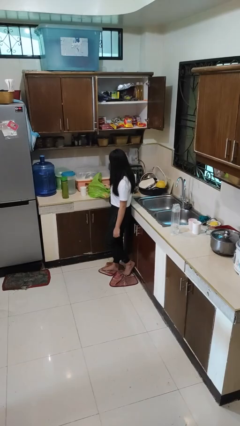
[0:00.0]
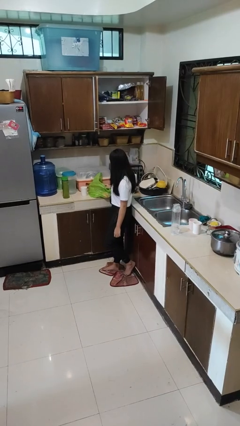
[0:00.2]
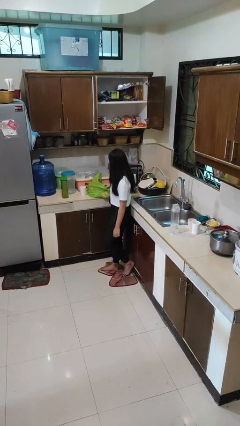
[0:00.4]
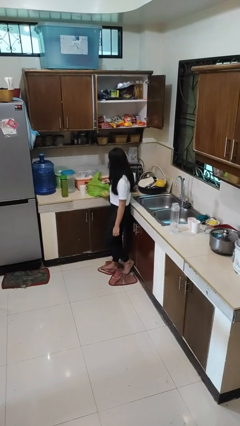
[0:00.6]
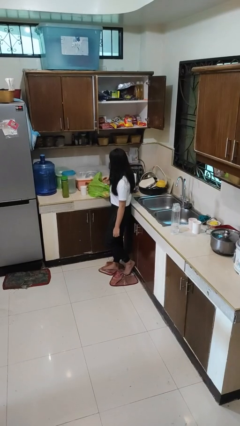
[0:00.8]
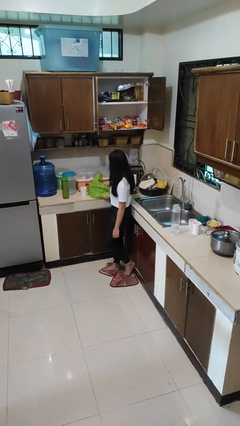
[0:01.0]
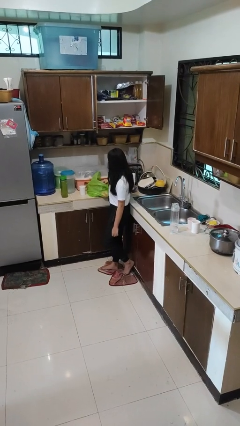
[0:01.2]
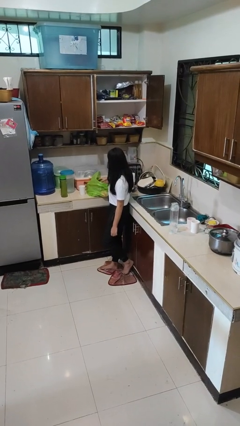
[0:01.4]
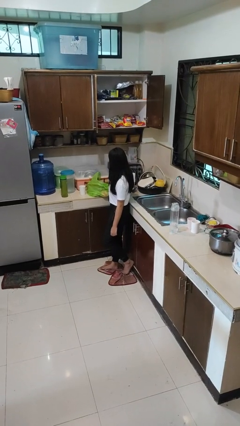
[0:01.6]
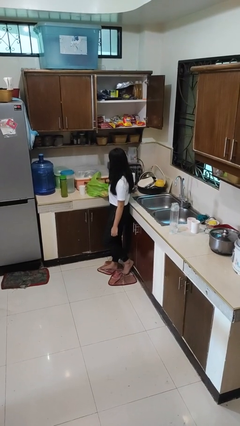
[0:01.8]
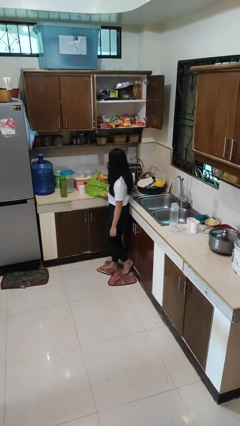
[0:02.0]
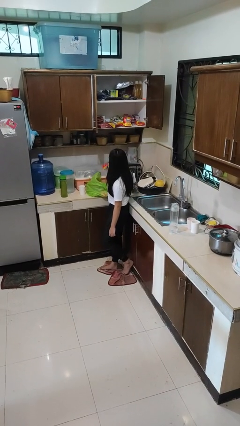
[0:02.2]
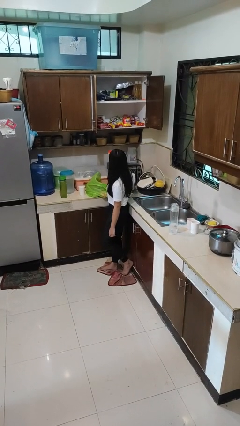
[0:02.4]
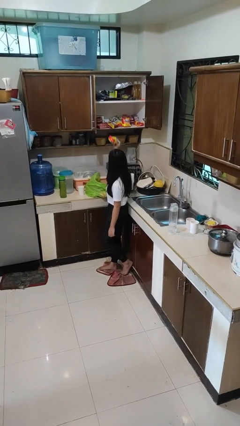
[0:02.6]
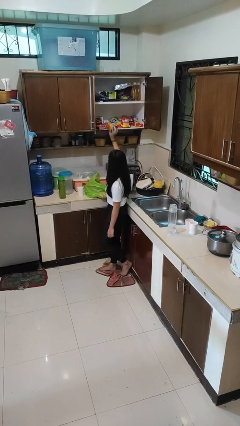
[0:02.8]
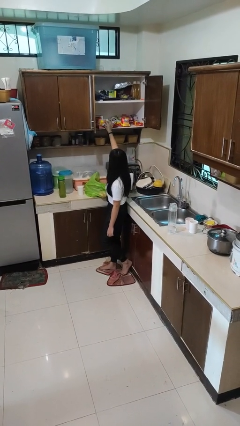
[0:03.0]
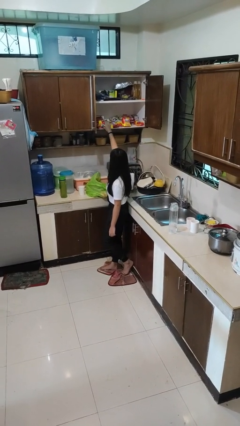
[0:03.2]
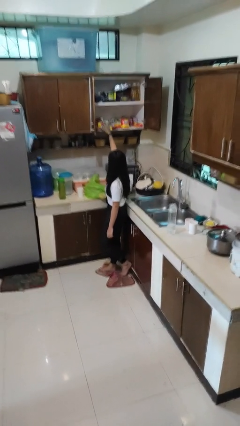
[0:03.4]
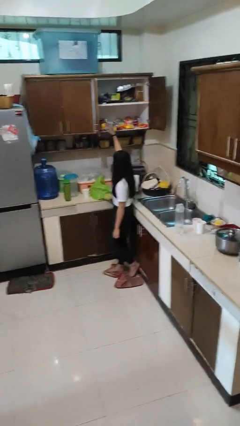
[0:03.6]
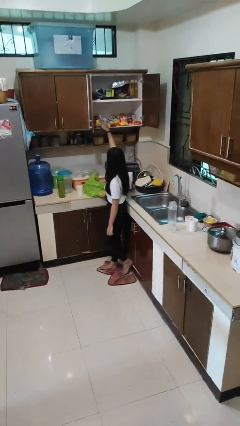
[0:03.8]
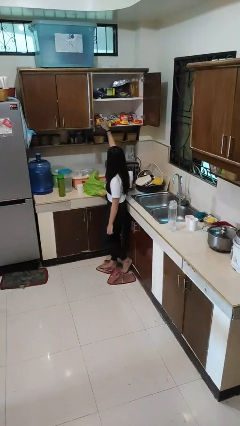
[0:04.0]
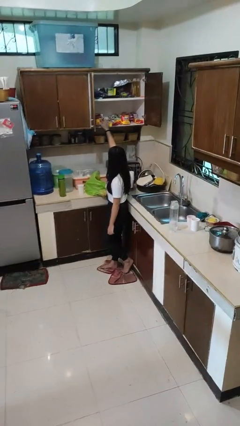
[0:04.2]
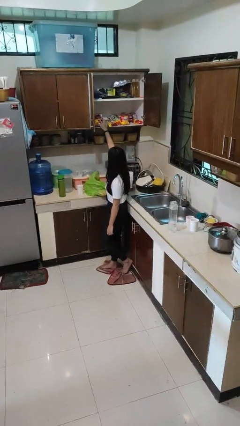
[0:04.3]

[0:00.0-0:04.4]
person loads groceries into cabinet

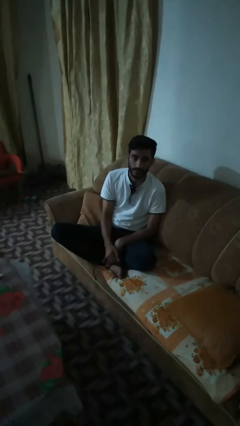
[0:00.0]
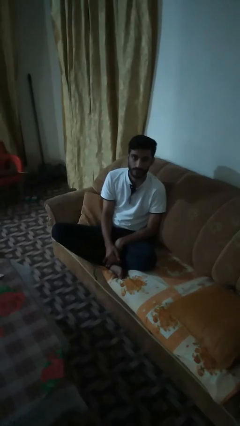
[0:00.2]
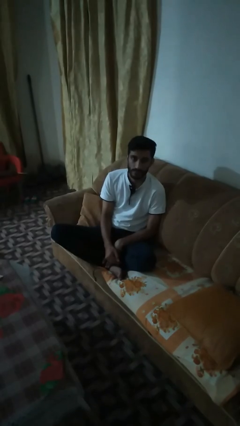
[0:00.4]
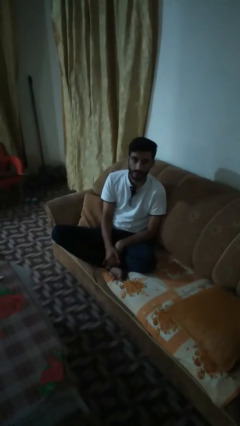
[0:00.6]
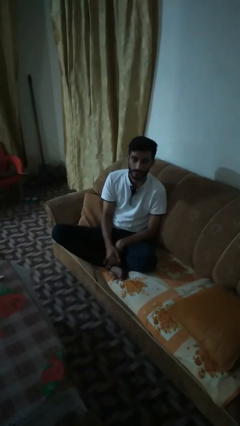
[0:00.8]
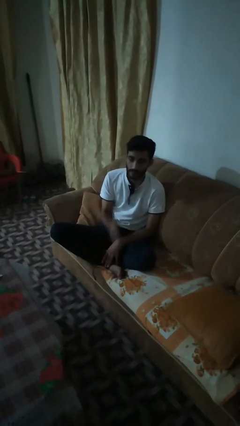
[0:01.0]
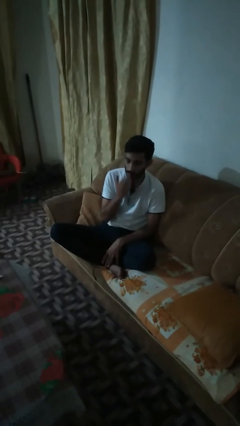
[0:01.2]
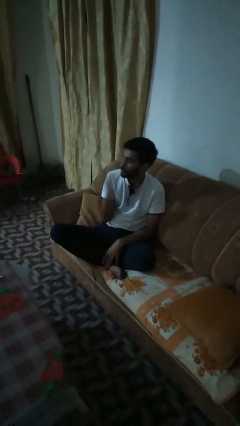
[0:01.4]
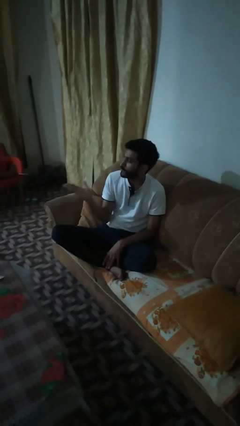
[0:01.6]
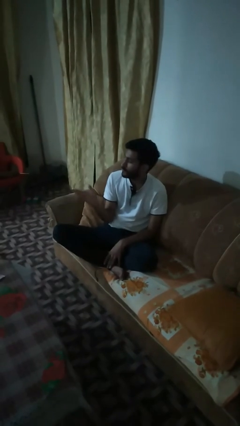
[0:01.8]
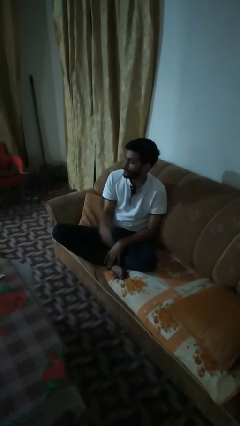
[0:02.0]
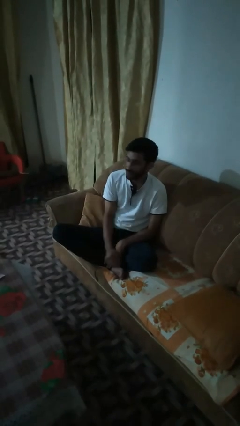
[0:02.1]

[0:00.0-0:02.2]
person gestures blow kiss

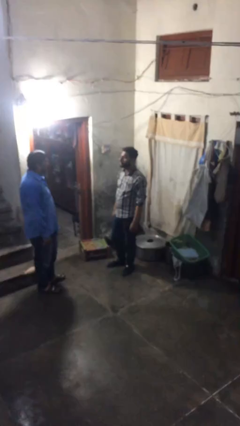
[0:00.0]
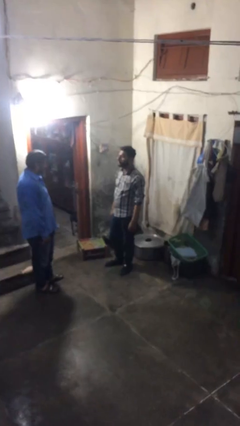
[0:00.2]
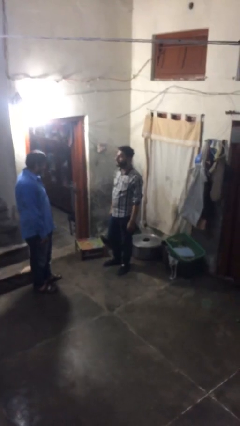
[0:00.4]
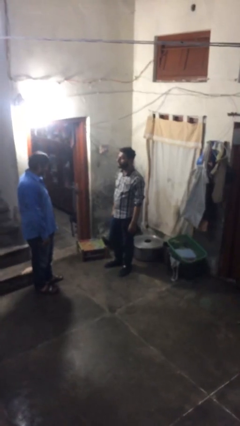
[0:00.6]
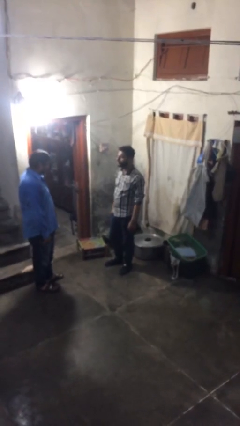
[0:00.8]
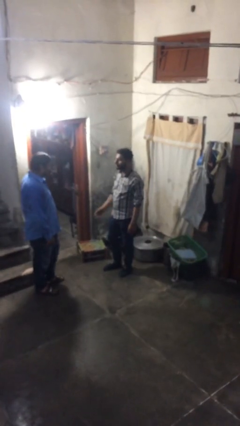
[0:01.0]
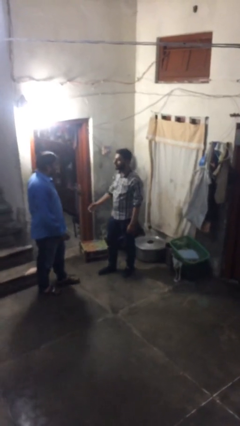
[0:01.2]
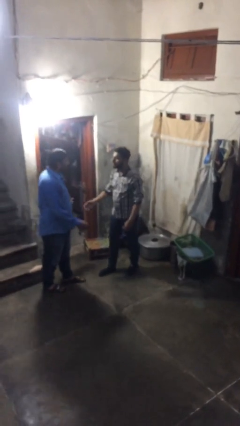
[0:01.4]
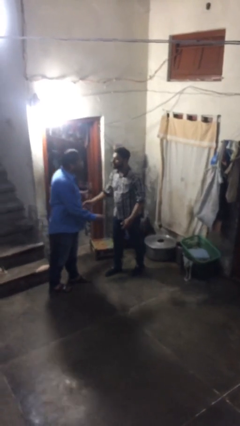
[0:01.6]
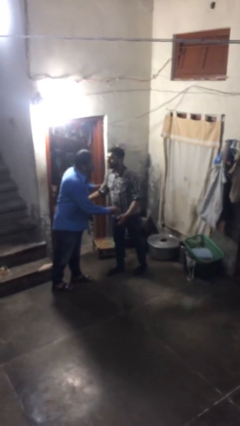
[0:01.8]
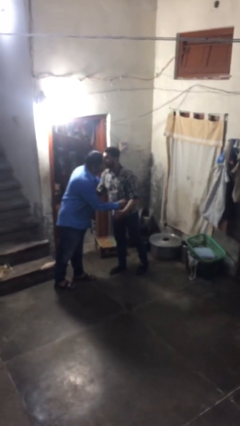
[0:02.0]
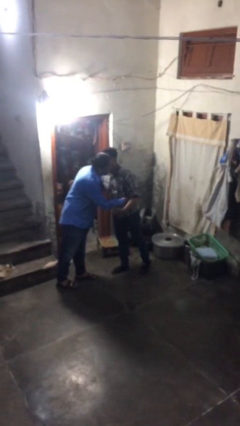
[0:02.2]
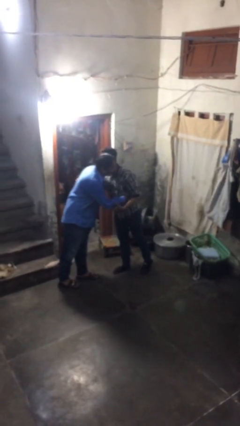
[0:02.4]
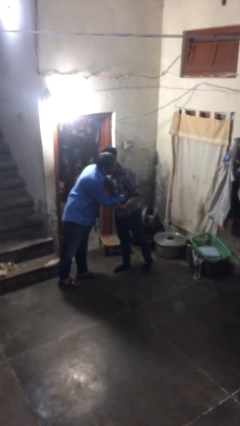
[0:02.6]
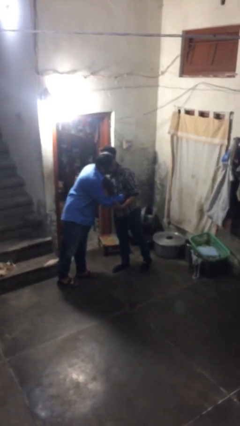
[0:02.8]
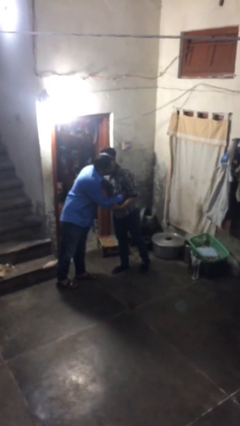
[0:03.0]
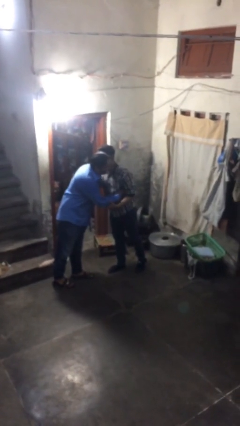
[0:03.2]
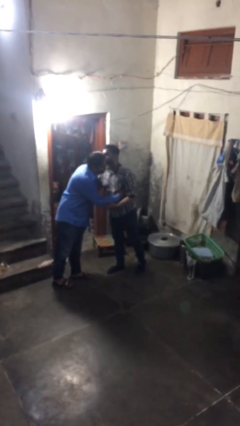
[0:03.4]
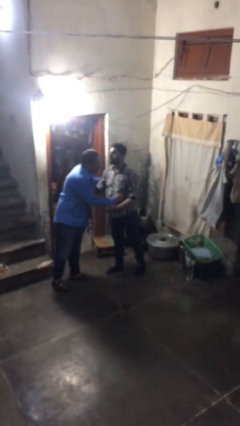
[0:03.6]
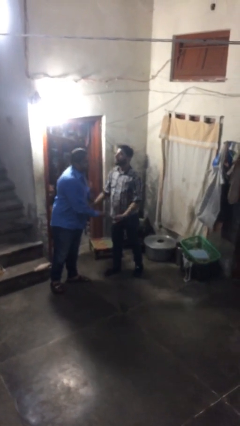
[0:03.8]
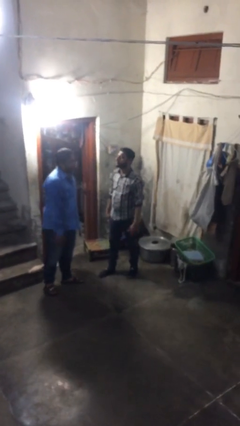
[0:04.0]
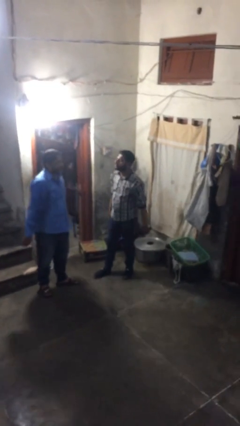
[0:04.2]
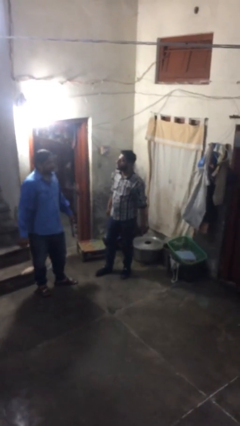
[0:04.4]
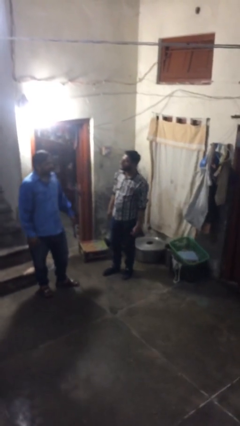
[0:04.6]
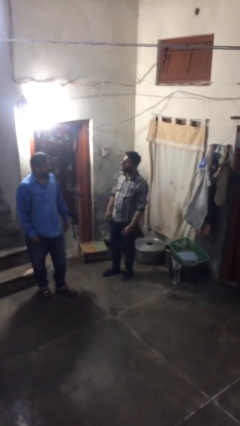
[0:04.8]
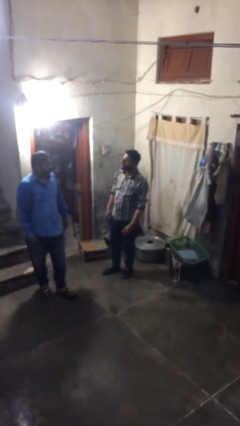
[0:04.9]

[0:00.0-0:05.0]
person embraces person

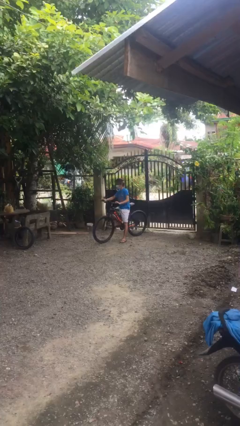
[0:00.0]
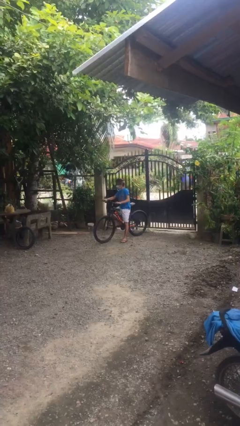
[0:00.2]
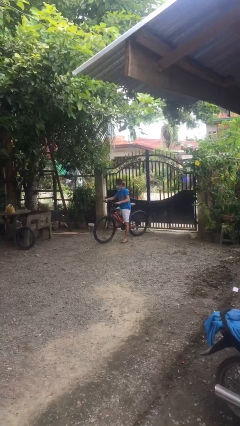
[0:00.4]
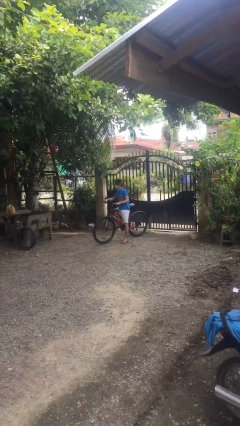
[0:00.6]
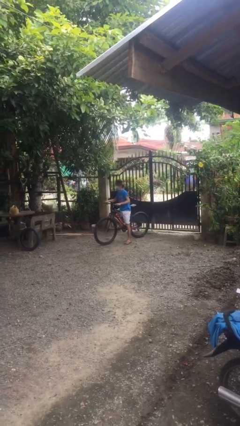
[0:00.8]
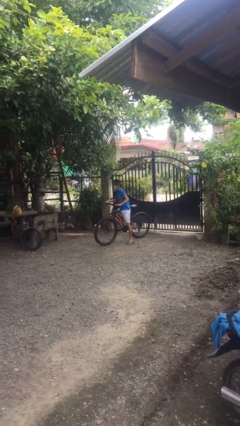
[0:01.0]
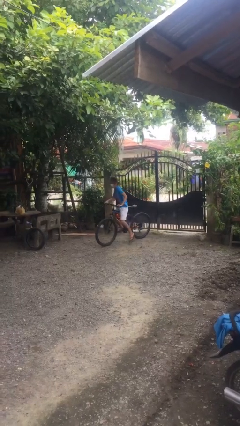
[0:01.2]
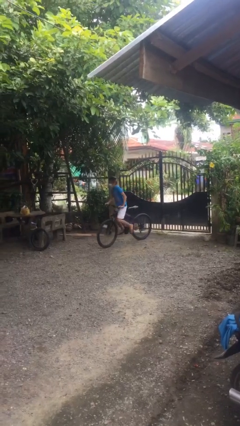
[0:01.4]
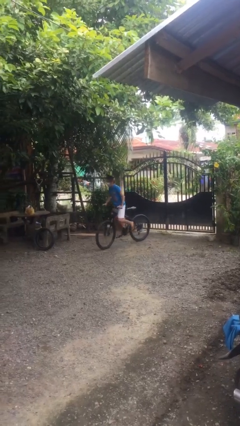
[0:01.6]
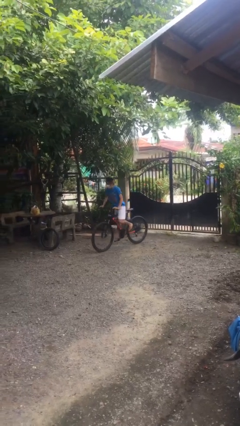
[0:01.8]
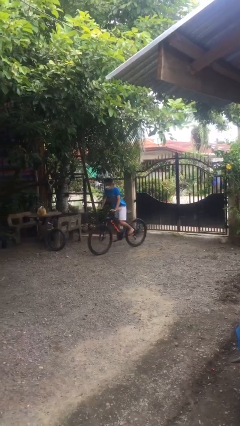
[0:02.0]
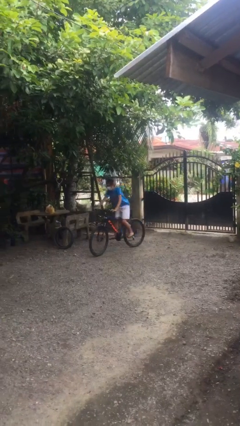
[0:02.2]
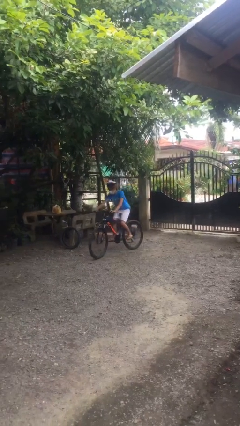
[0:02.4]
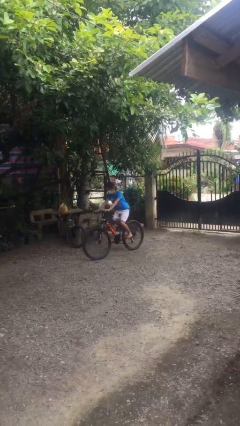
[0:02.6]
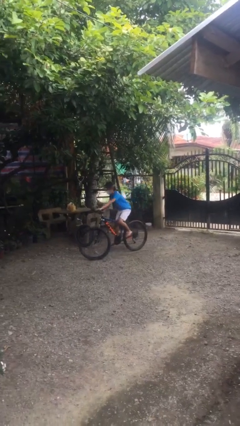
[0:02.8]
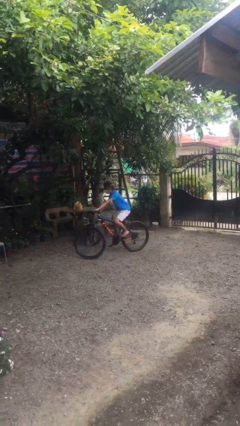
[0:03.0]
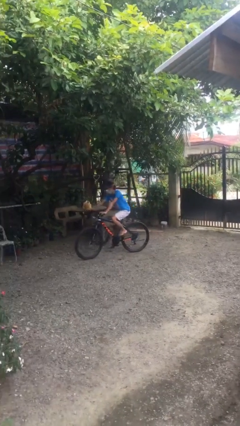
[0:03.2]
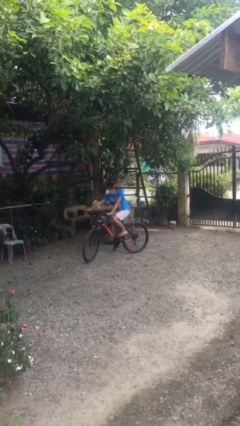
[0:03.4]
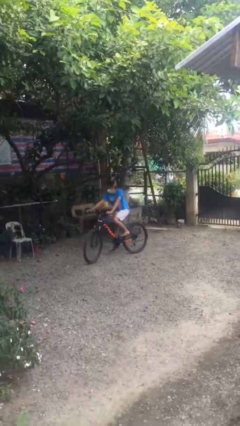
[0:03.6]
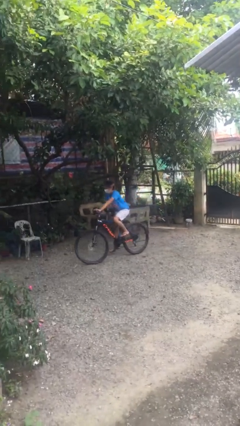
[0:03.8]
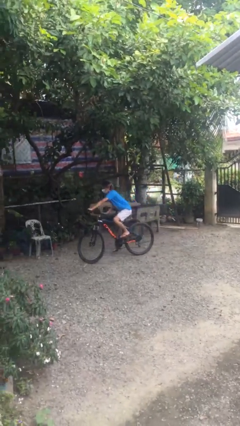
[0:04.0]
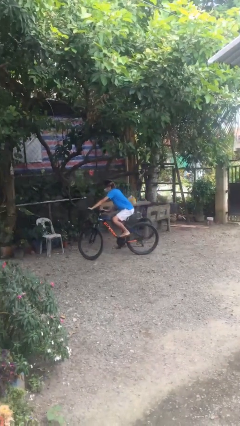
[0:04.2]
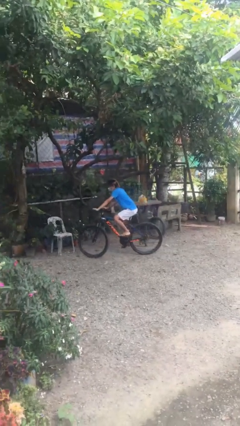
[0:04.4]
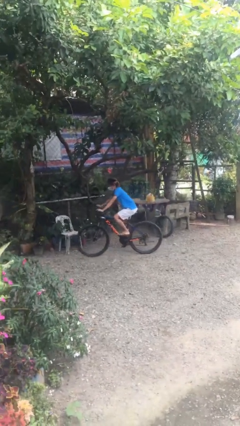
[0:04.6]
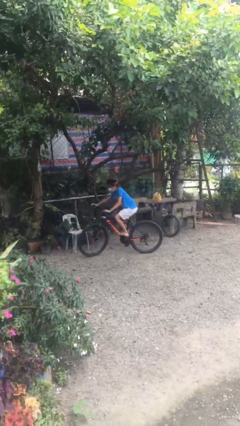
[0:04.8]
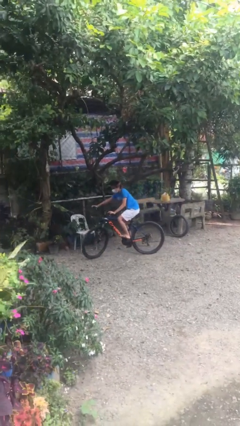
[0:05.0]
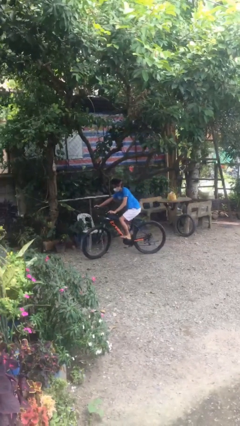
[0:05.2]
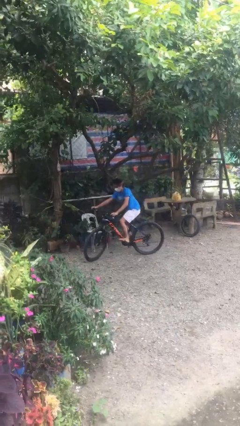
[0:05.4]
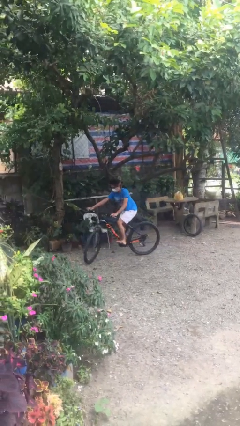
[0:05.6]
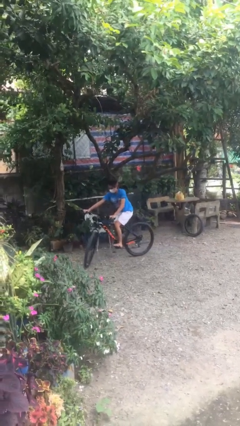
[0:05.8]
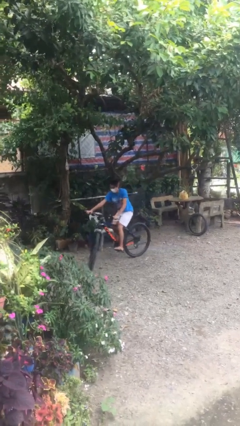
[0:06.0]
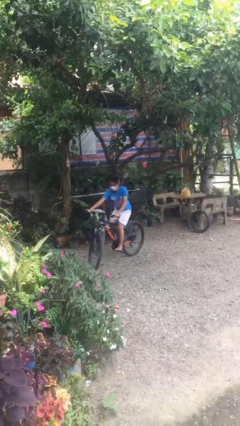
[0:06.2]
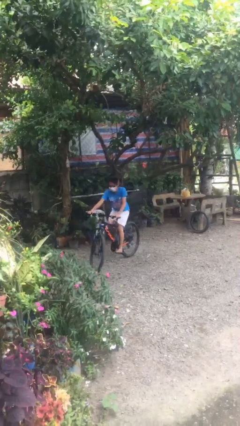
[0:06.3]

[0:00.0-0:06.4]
person rides bicycle

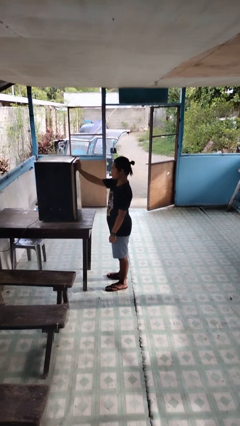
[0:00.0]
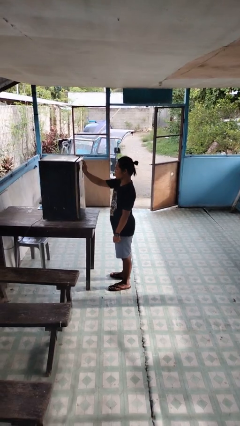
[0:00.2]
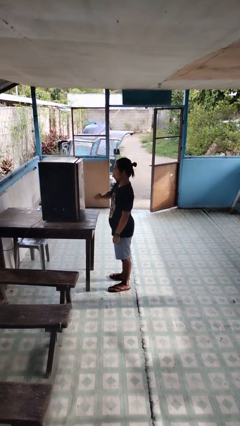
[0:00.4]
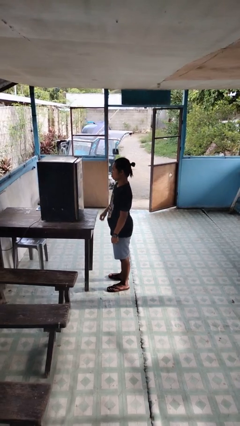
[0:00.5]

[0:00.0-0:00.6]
person closes refrigerator
